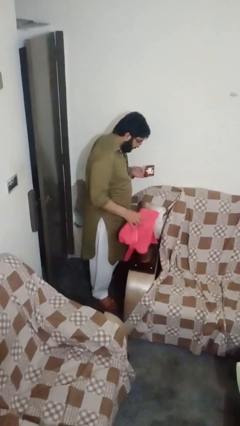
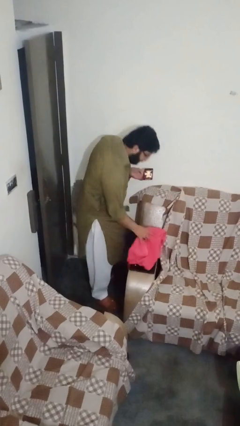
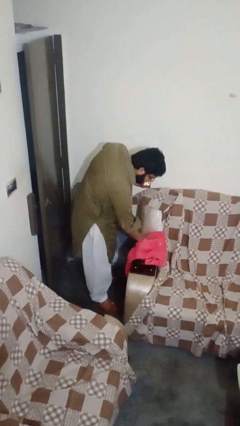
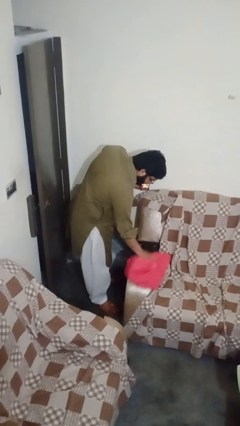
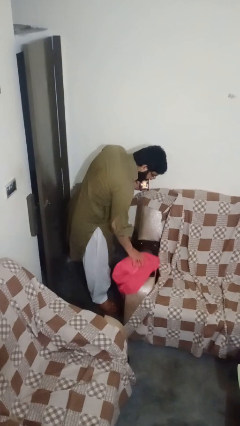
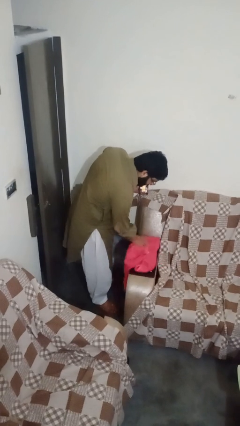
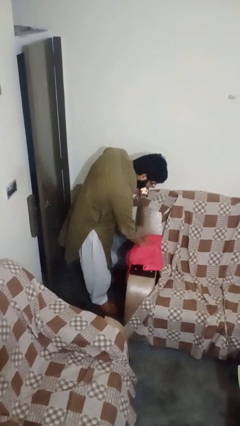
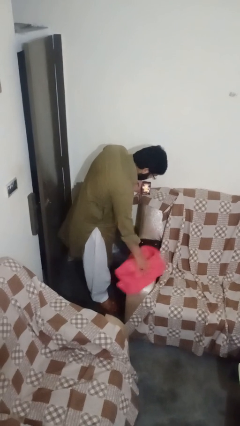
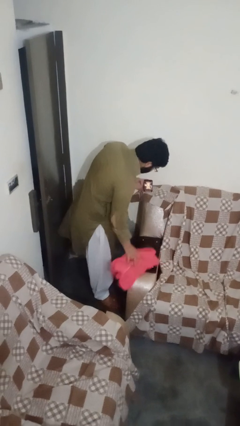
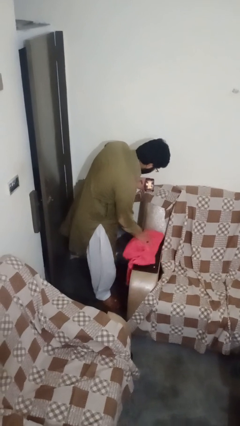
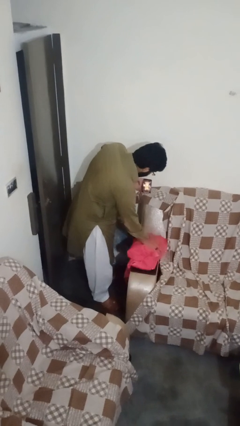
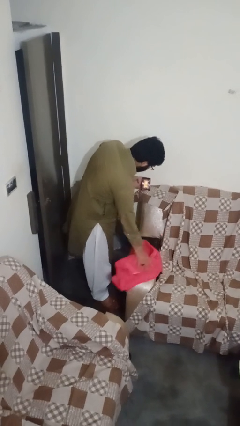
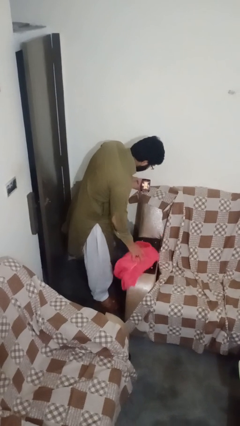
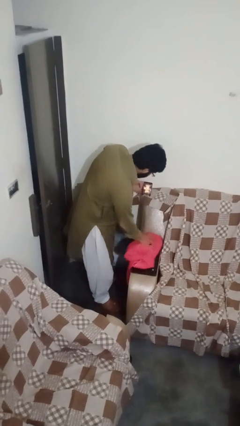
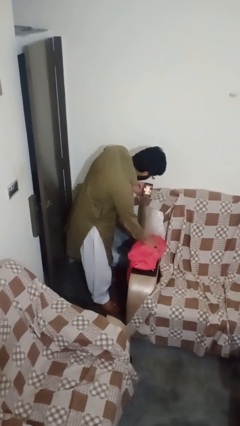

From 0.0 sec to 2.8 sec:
person dusts furniture

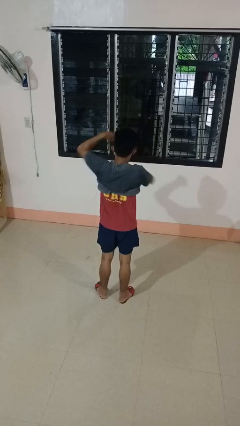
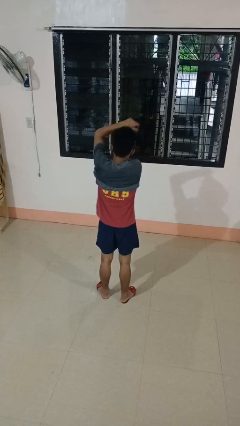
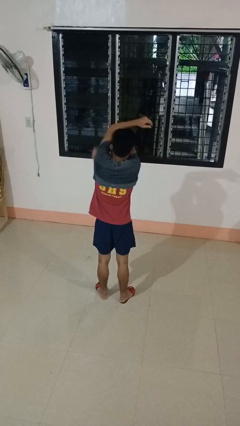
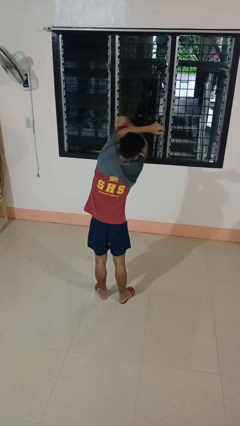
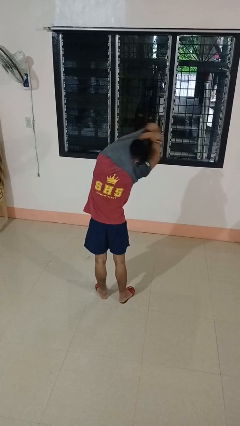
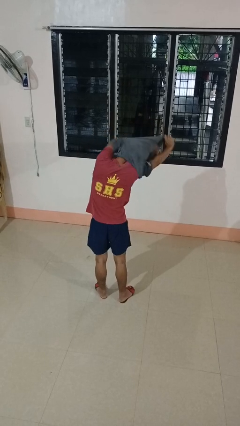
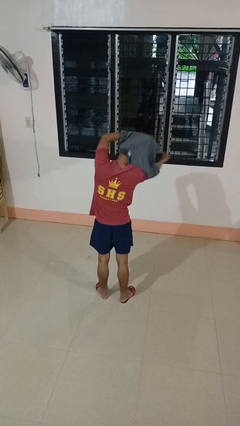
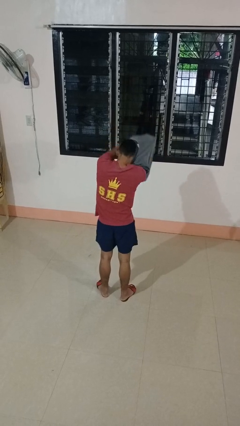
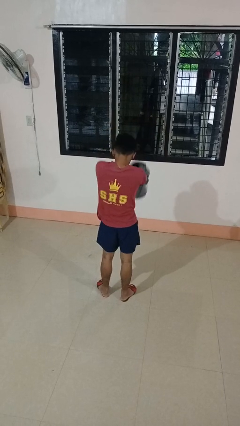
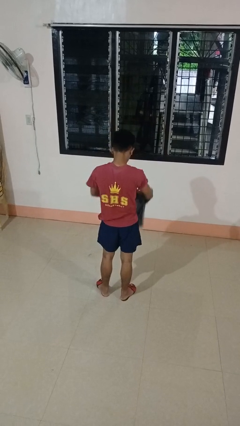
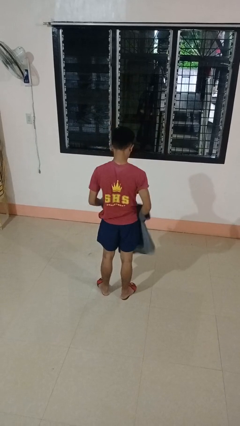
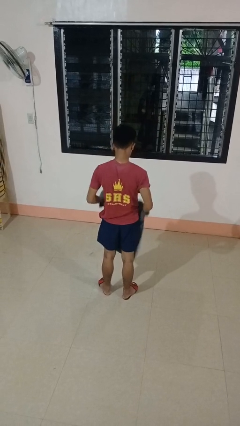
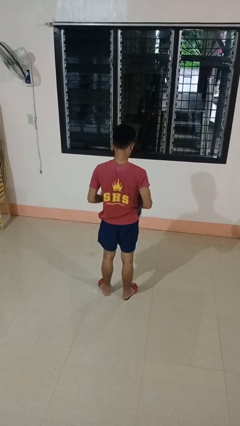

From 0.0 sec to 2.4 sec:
person takes off shirt

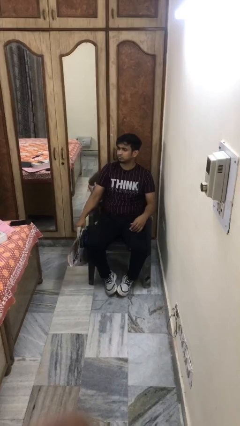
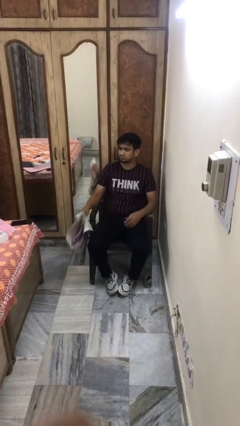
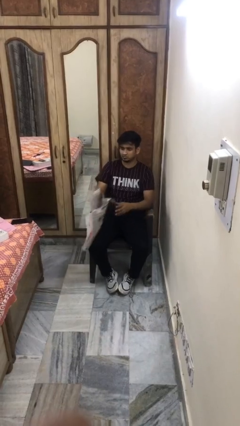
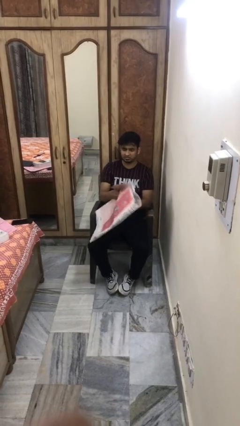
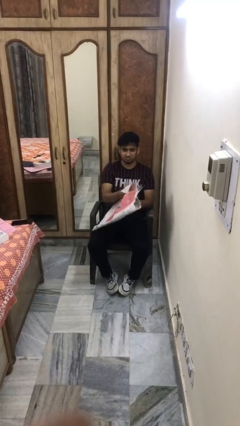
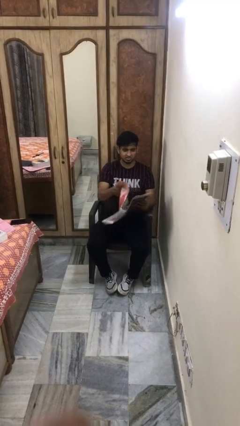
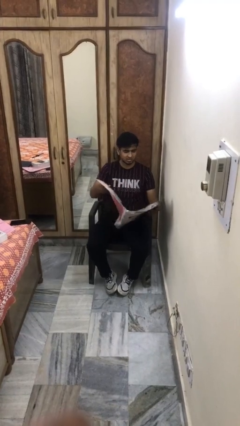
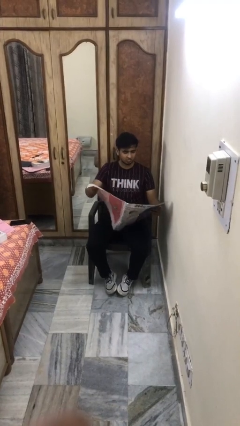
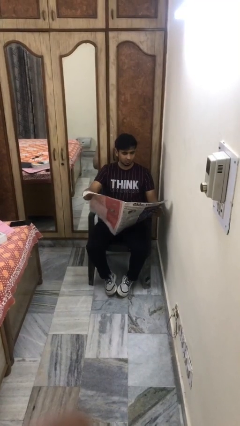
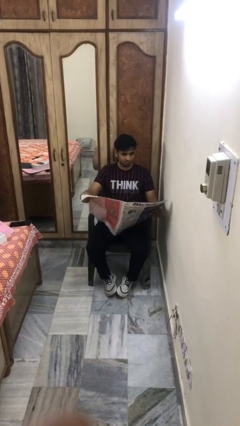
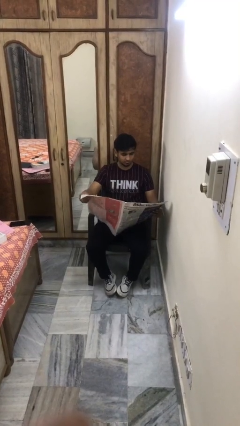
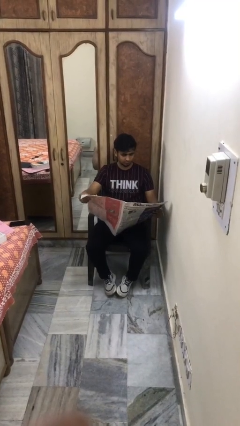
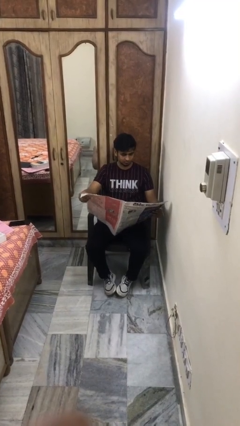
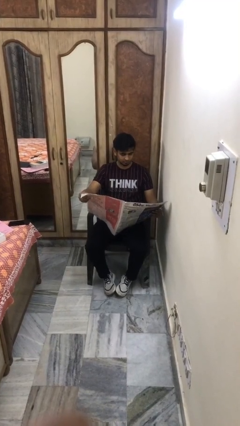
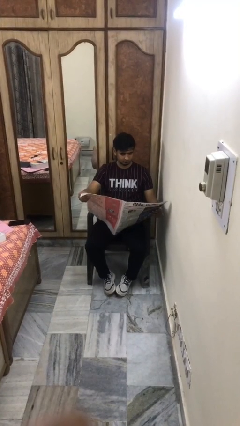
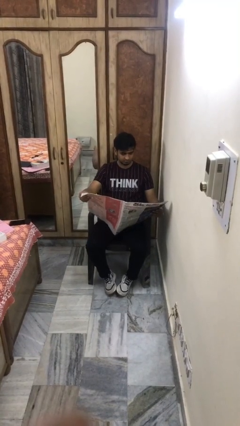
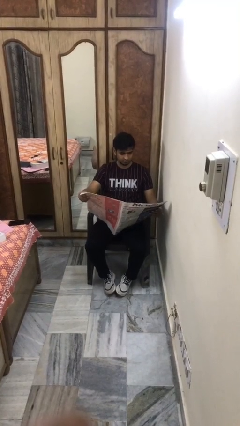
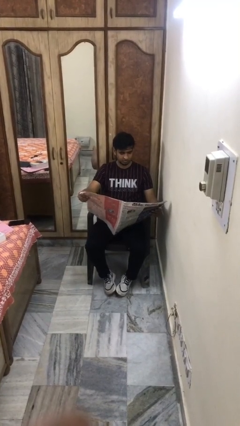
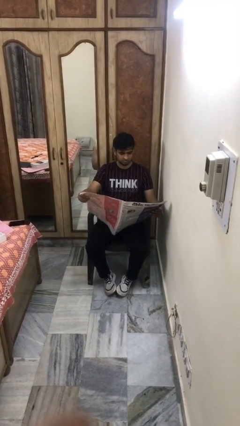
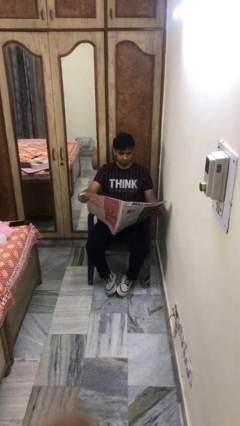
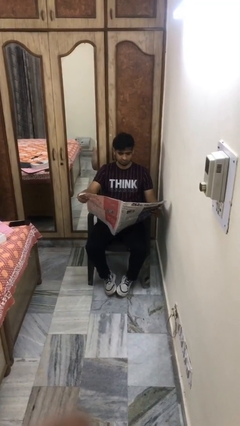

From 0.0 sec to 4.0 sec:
person reads newspaper

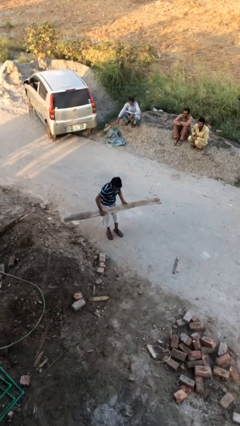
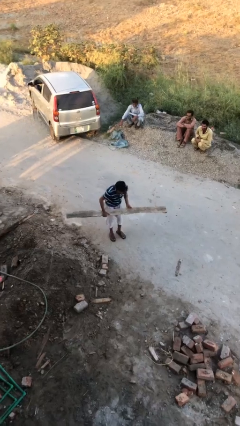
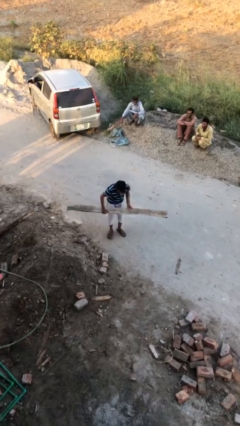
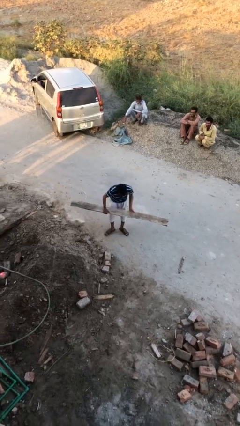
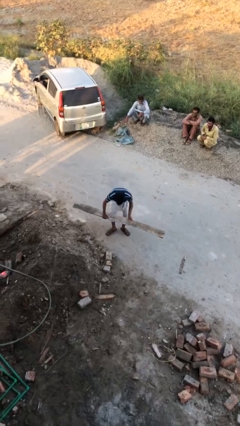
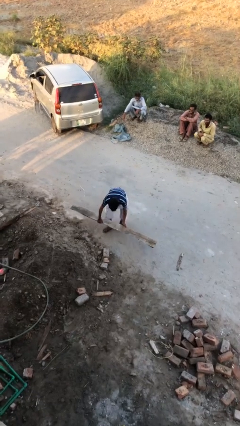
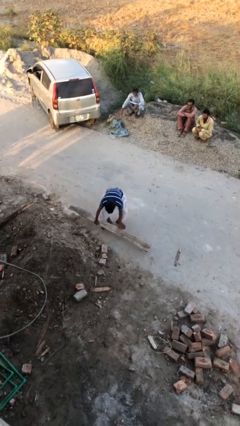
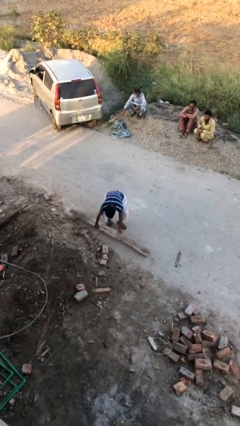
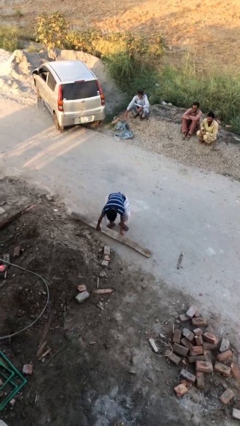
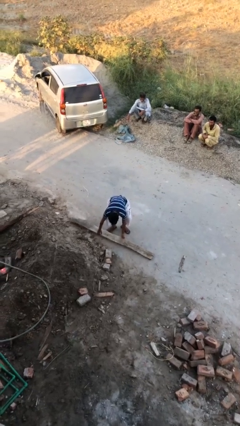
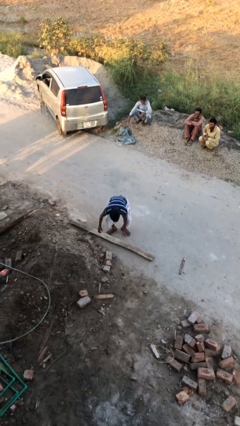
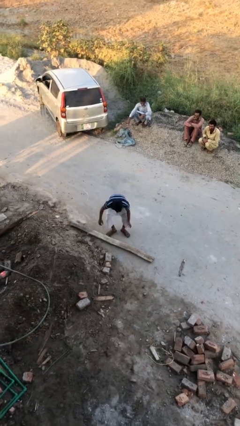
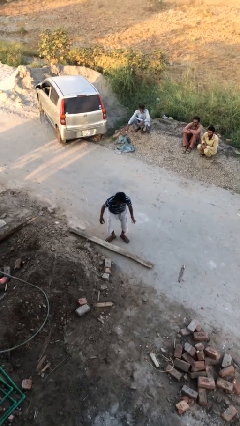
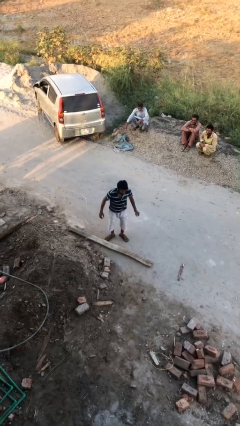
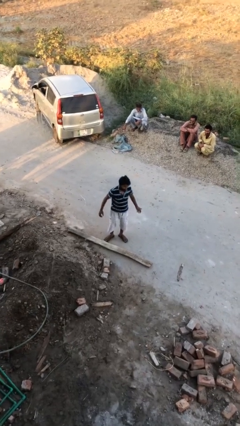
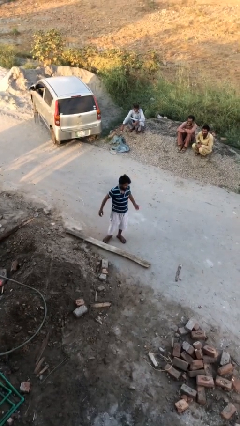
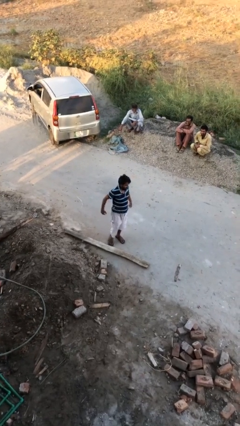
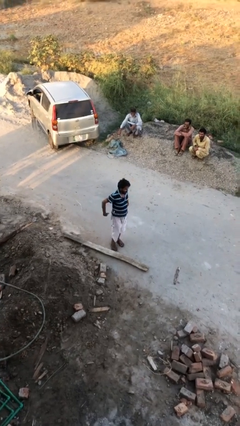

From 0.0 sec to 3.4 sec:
person puts down object on floor

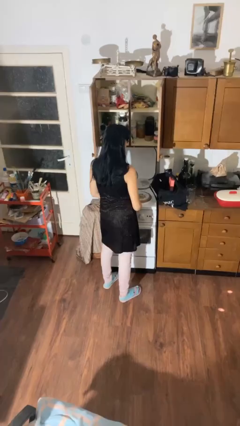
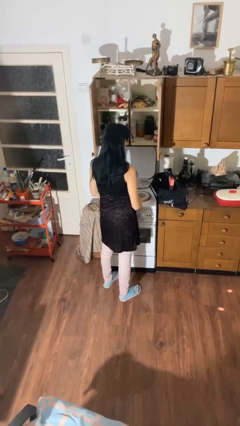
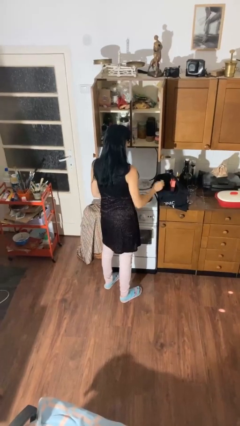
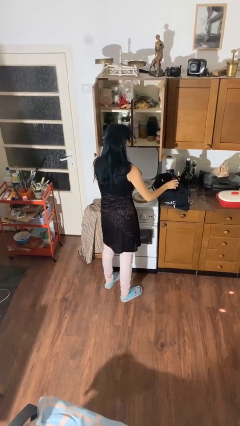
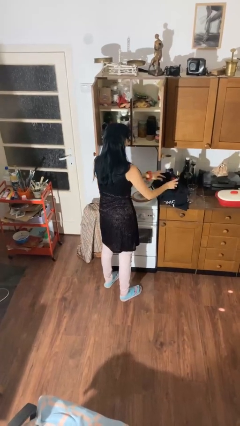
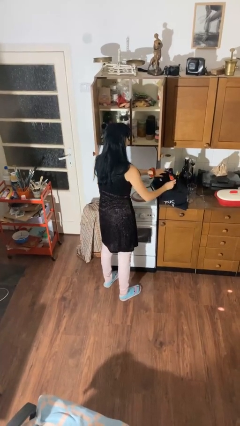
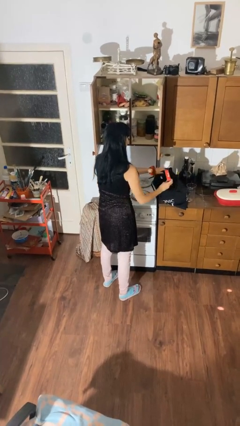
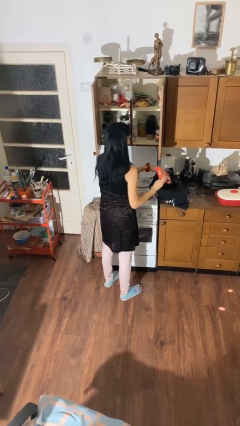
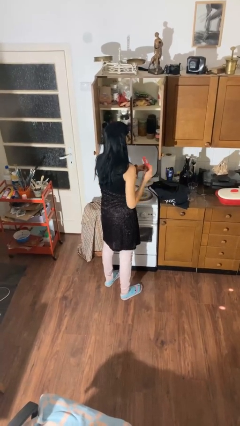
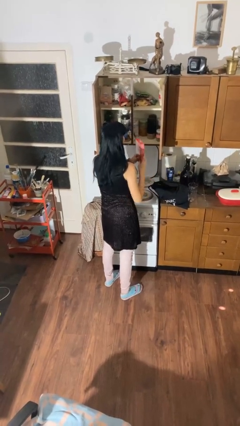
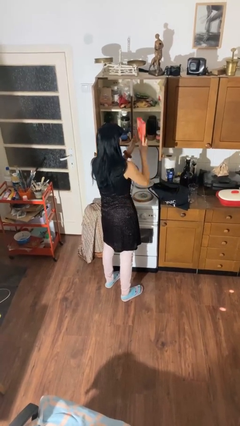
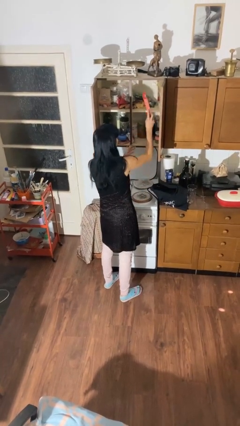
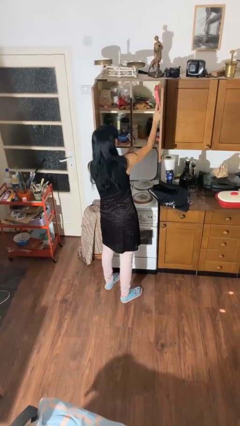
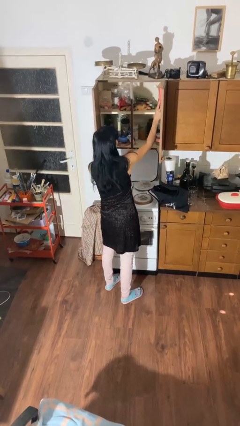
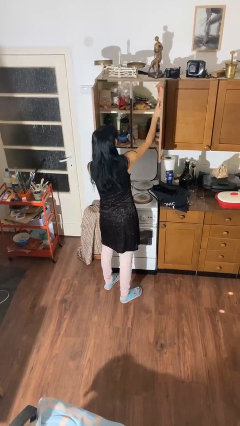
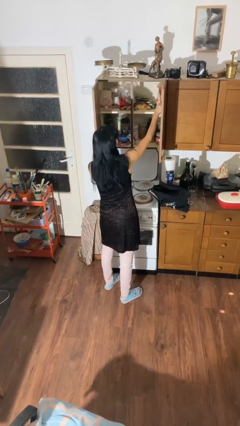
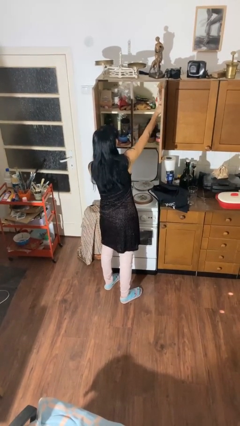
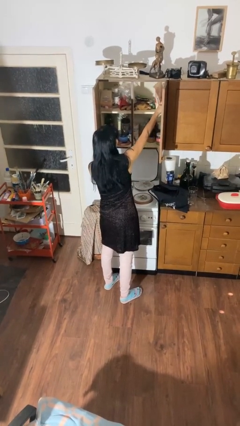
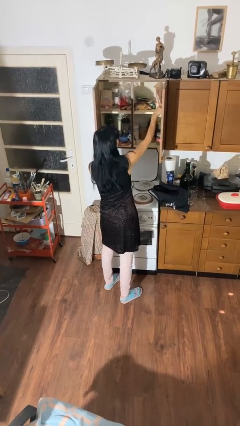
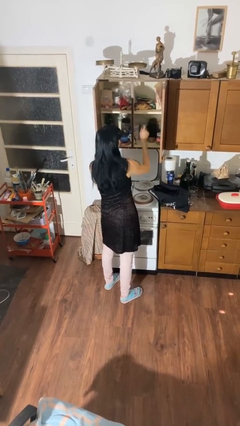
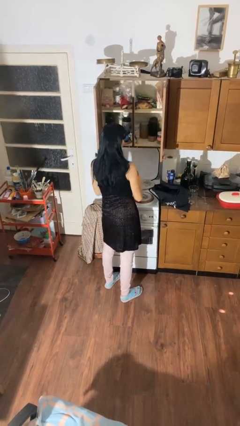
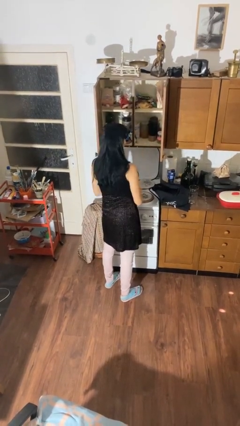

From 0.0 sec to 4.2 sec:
person loads groceries into cabinet

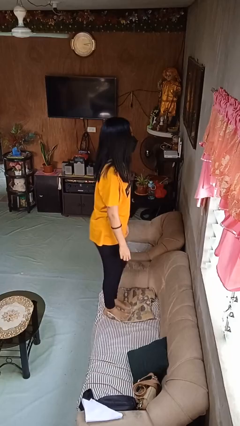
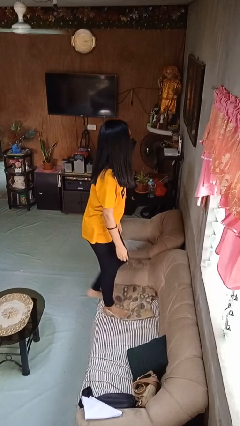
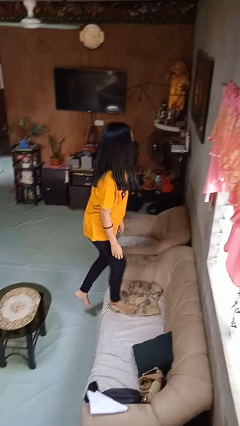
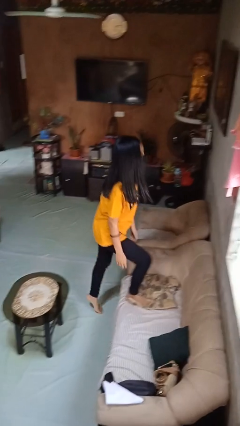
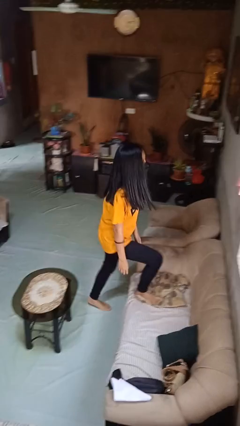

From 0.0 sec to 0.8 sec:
person climbs off couch
